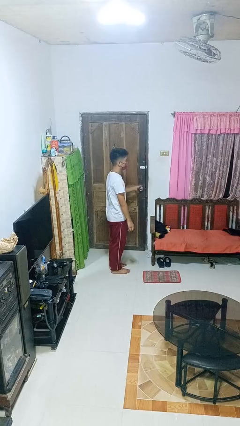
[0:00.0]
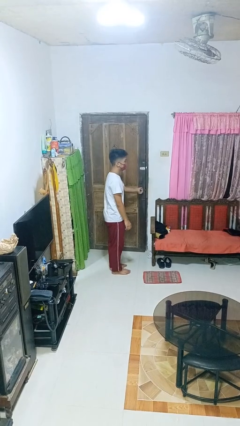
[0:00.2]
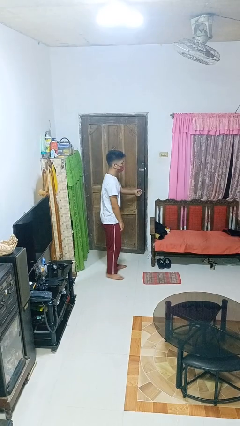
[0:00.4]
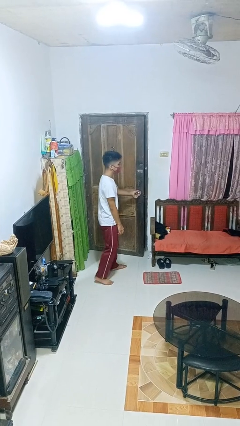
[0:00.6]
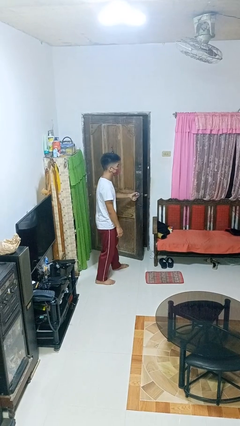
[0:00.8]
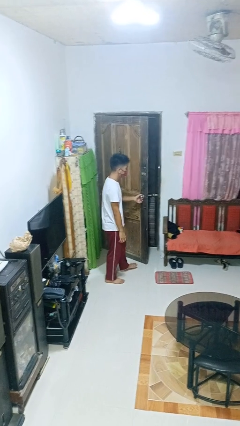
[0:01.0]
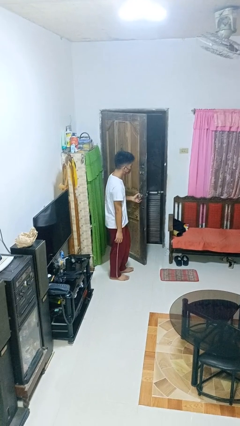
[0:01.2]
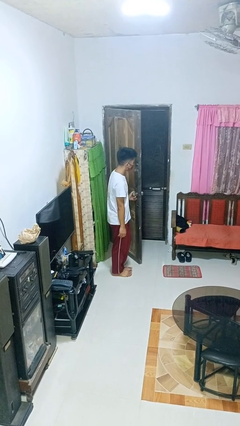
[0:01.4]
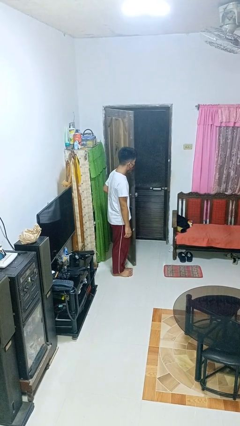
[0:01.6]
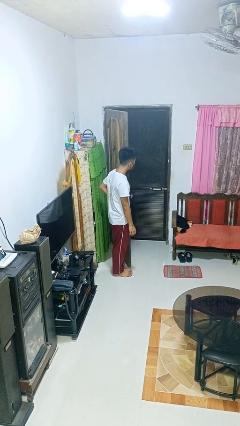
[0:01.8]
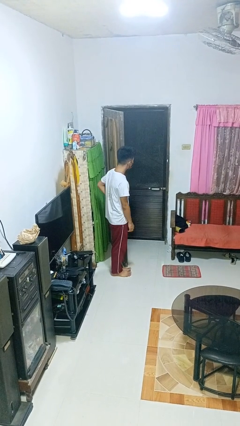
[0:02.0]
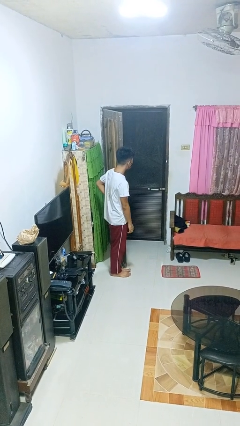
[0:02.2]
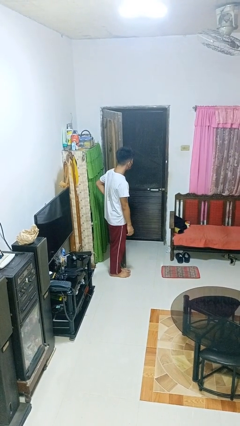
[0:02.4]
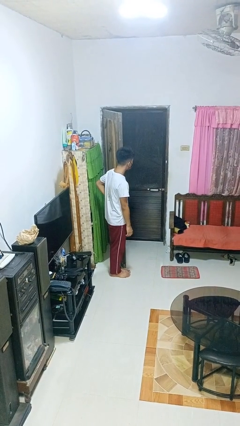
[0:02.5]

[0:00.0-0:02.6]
person opens facility door

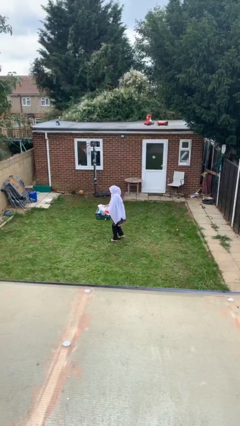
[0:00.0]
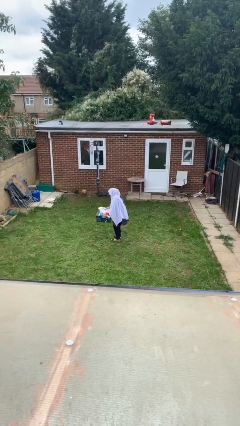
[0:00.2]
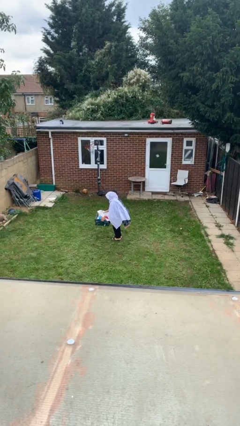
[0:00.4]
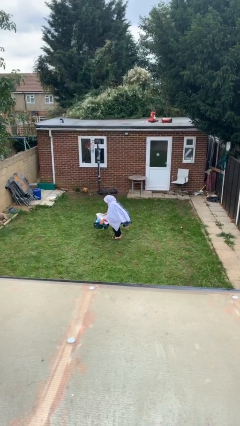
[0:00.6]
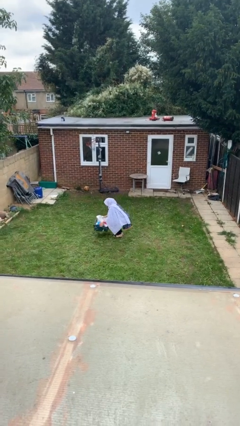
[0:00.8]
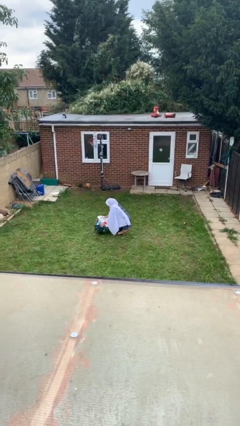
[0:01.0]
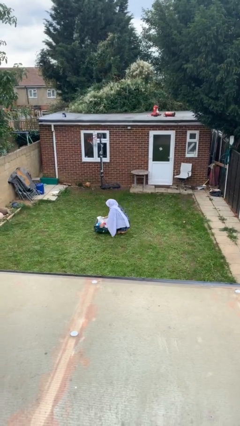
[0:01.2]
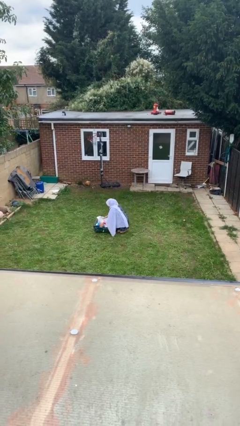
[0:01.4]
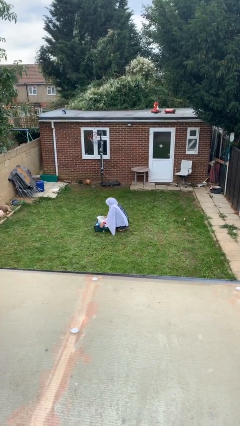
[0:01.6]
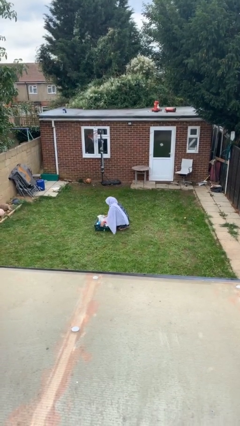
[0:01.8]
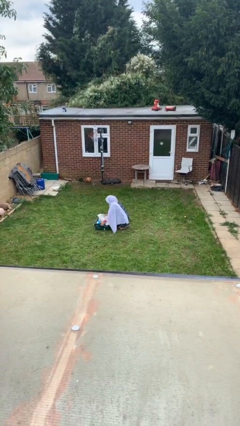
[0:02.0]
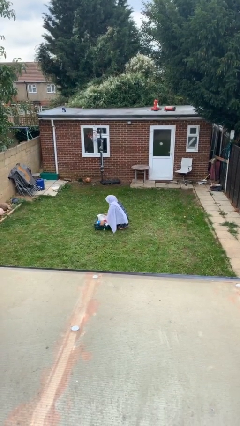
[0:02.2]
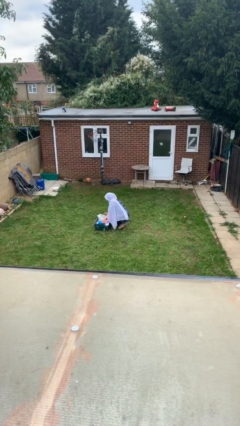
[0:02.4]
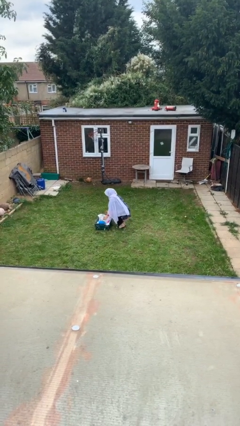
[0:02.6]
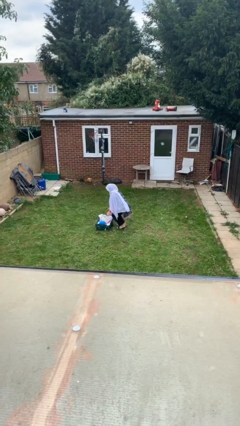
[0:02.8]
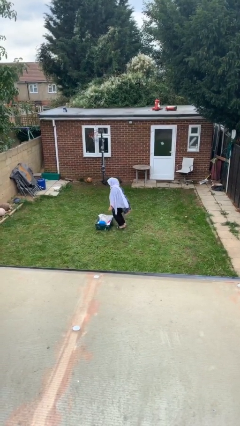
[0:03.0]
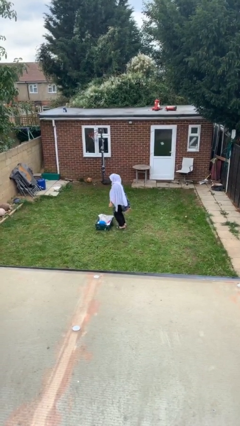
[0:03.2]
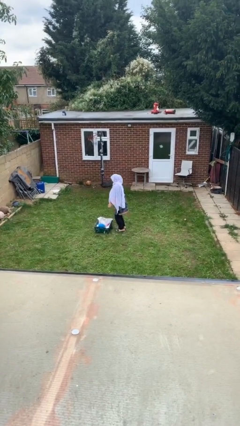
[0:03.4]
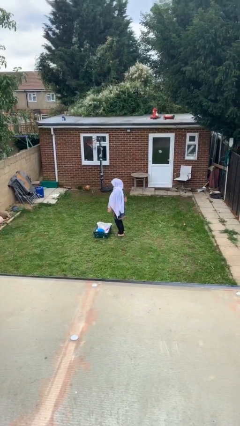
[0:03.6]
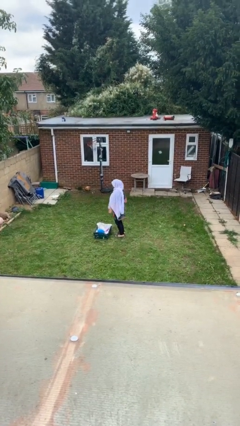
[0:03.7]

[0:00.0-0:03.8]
person puts down object on floor

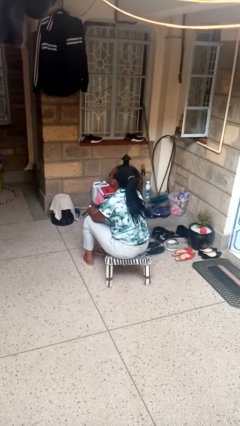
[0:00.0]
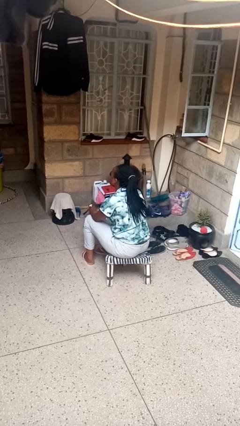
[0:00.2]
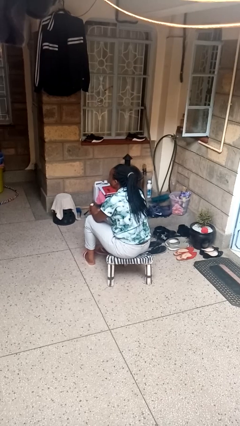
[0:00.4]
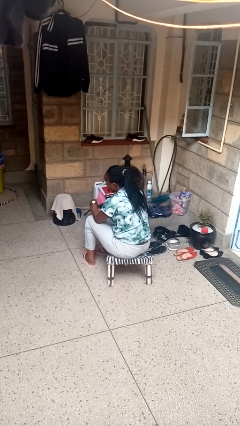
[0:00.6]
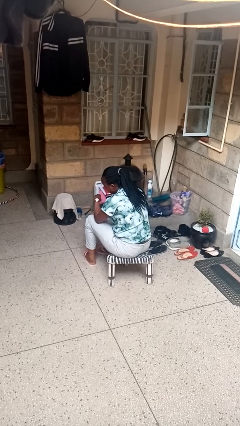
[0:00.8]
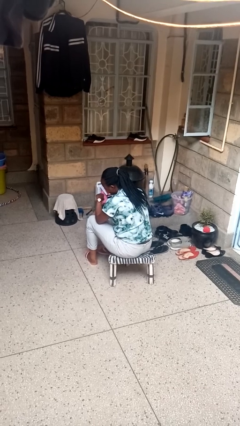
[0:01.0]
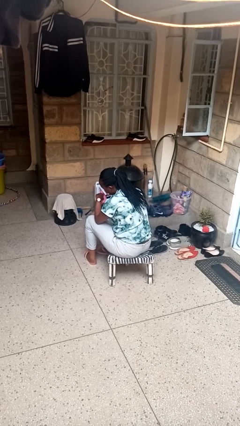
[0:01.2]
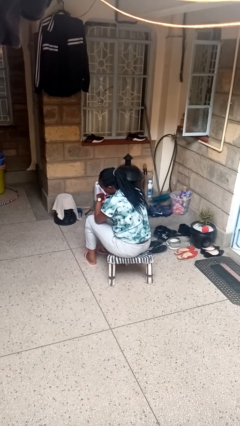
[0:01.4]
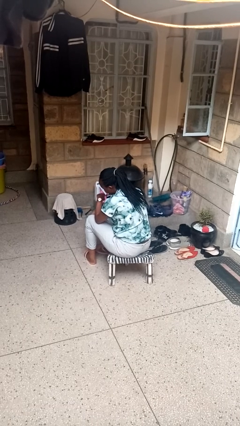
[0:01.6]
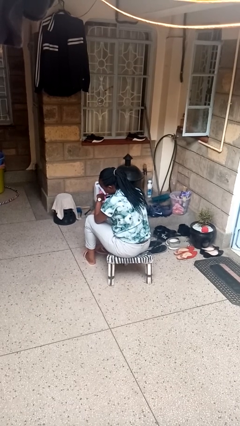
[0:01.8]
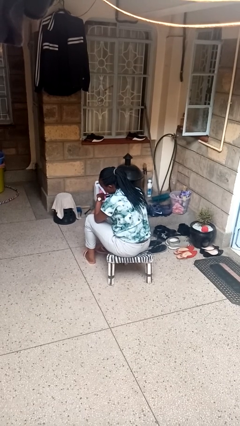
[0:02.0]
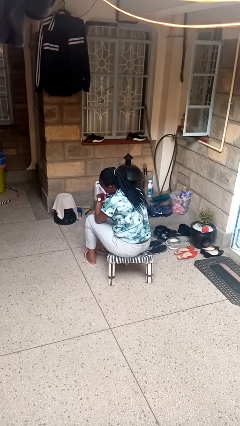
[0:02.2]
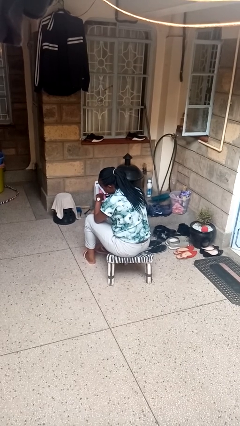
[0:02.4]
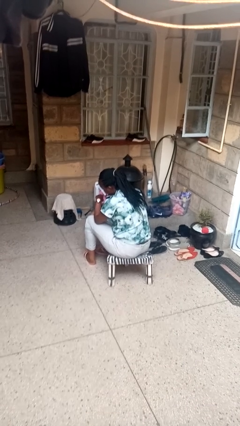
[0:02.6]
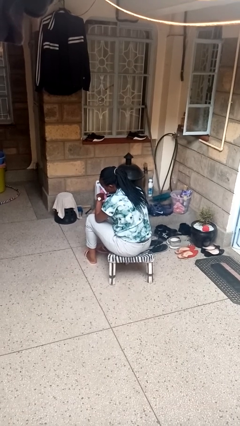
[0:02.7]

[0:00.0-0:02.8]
person looks at wristwatch

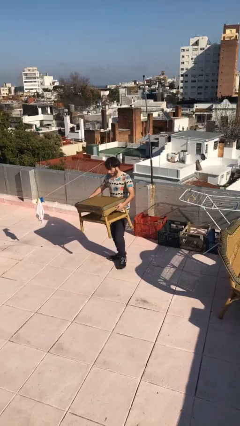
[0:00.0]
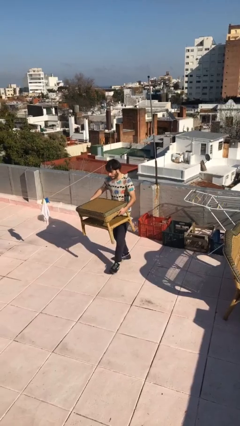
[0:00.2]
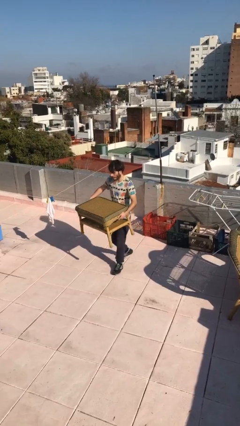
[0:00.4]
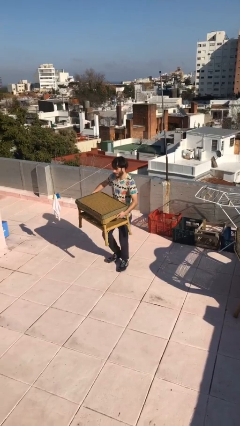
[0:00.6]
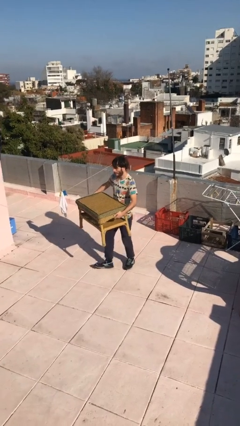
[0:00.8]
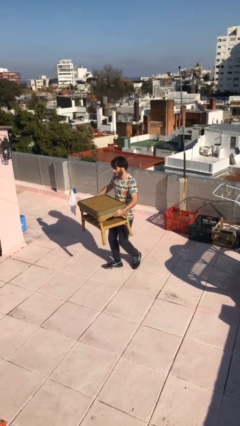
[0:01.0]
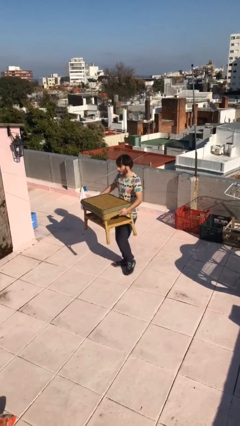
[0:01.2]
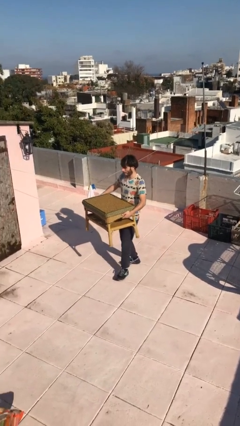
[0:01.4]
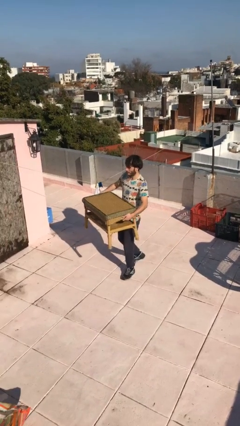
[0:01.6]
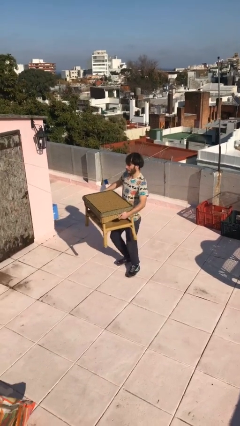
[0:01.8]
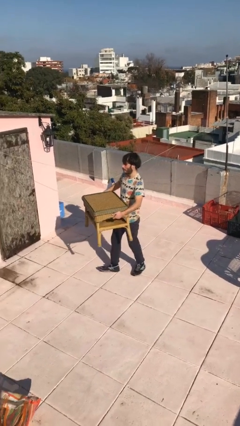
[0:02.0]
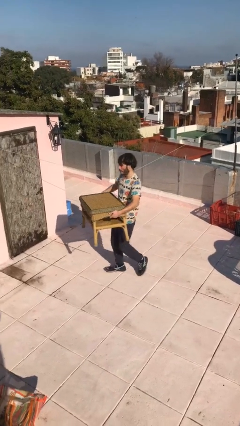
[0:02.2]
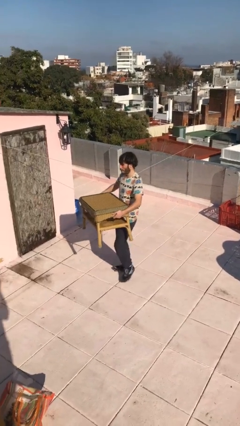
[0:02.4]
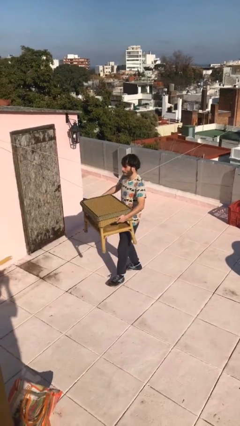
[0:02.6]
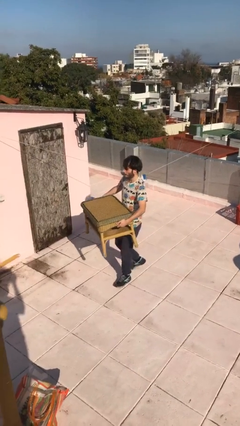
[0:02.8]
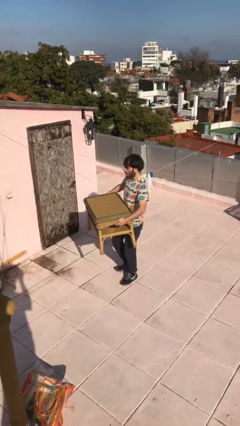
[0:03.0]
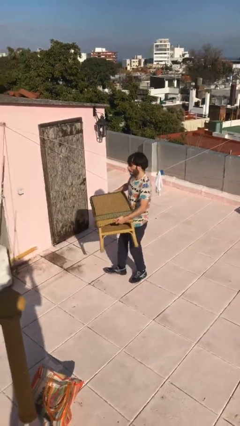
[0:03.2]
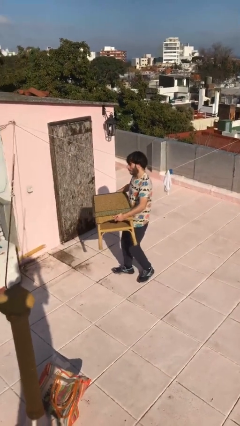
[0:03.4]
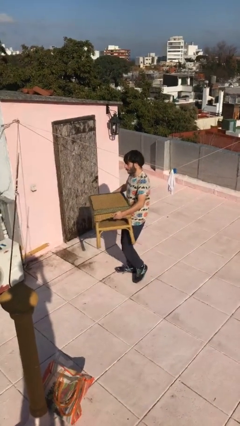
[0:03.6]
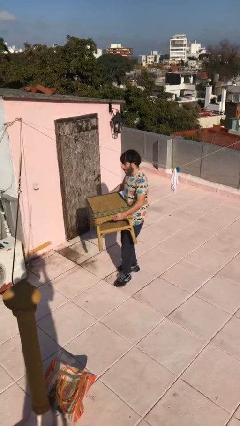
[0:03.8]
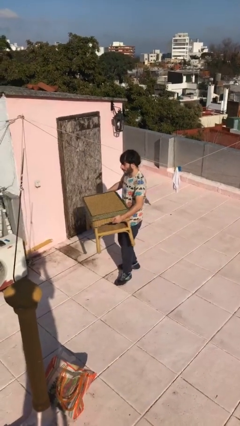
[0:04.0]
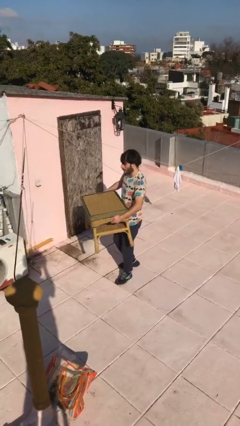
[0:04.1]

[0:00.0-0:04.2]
person carries furniture

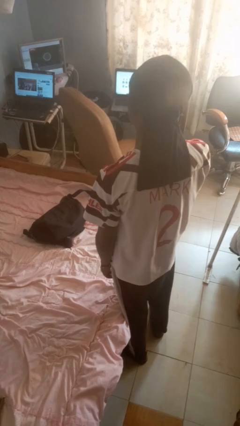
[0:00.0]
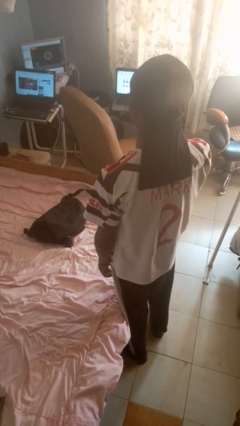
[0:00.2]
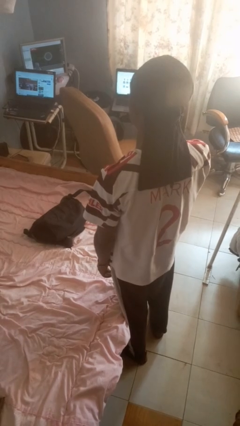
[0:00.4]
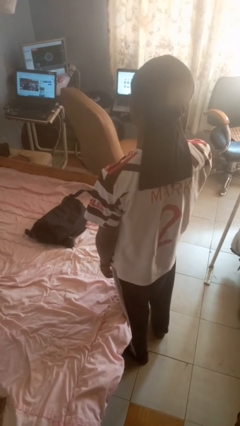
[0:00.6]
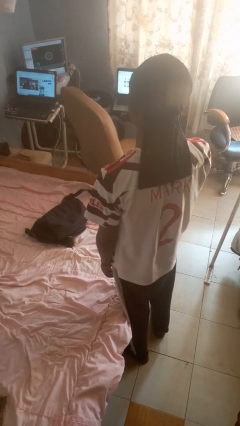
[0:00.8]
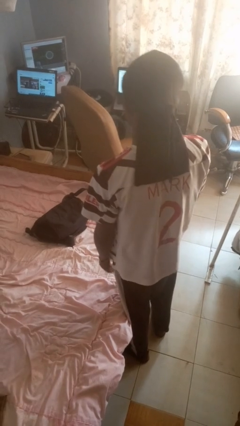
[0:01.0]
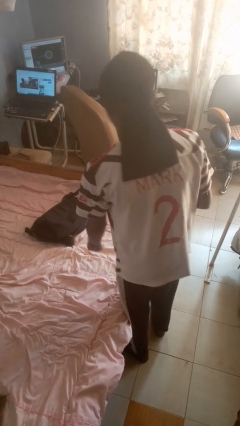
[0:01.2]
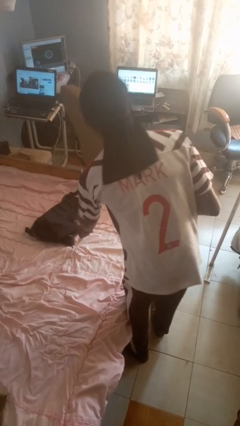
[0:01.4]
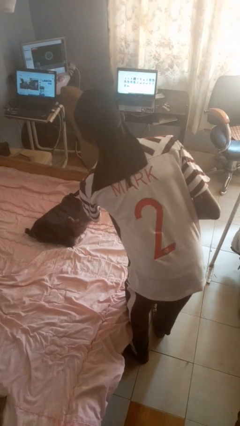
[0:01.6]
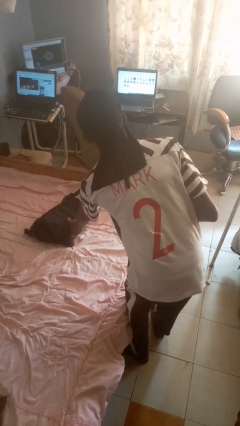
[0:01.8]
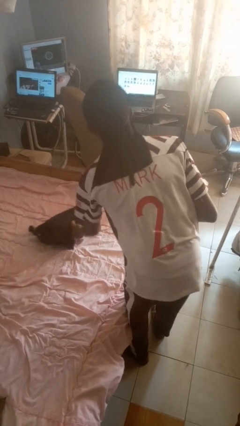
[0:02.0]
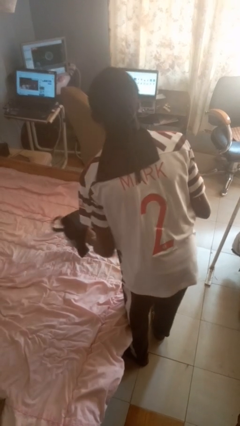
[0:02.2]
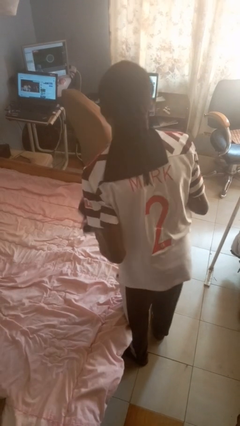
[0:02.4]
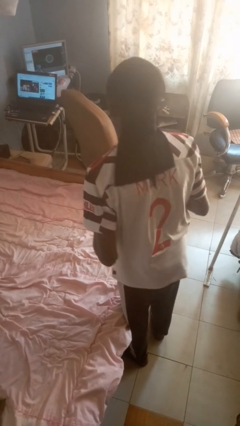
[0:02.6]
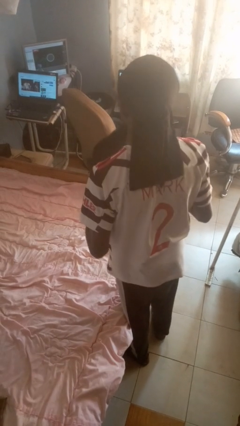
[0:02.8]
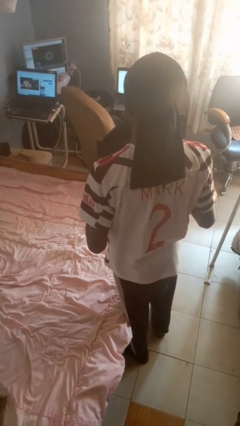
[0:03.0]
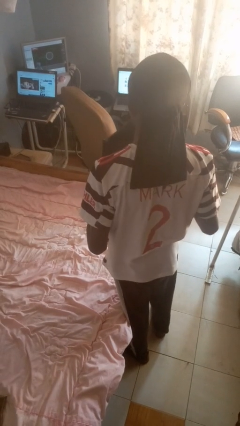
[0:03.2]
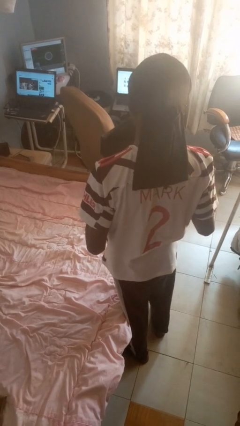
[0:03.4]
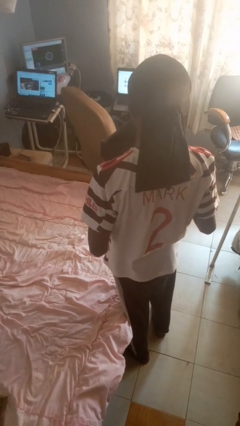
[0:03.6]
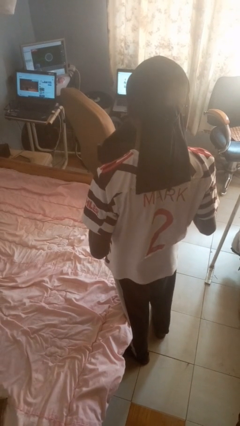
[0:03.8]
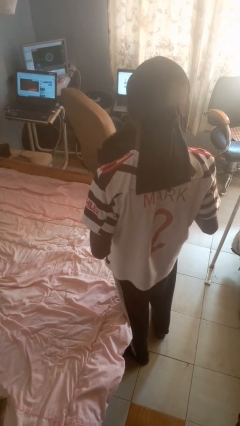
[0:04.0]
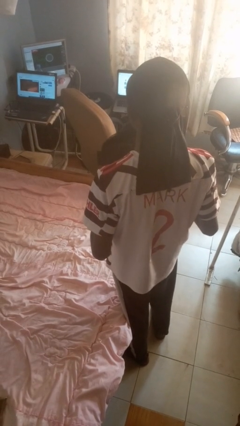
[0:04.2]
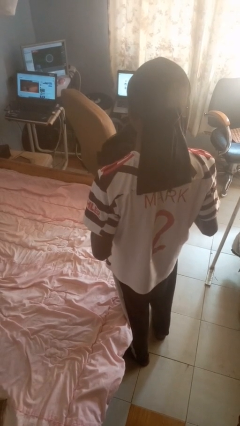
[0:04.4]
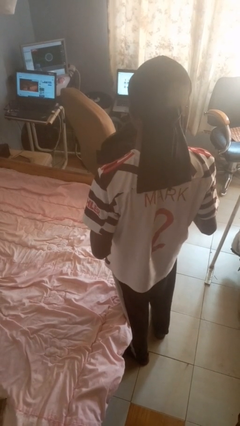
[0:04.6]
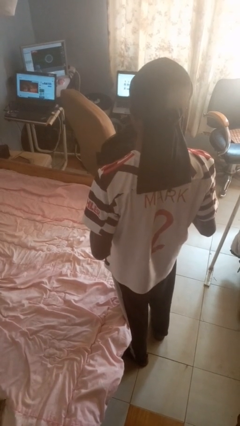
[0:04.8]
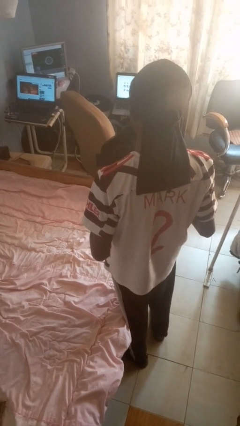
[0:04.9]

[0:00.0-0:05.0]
person picks up object from bed
